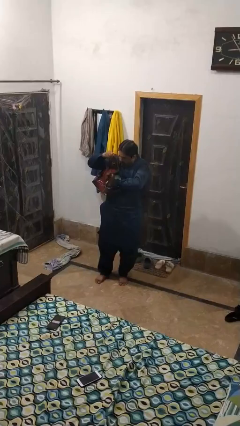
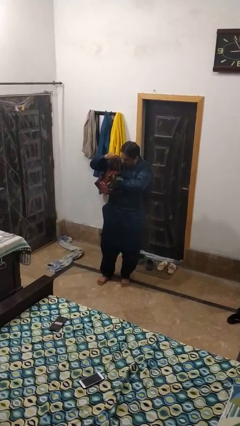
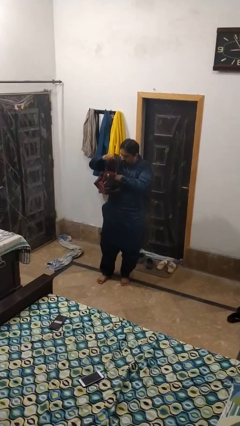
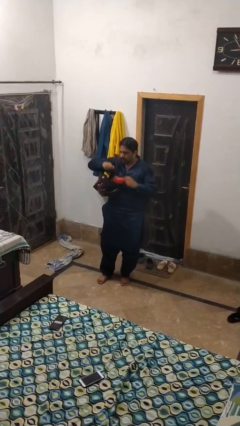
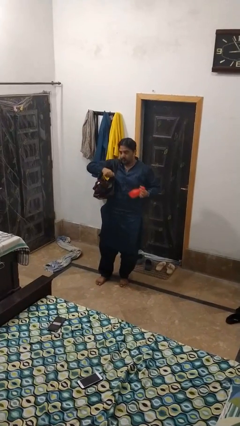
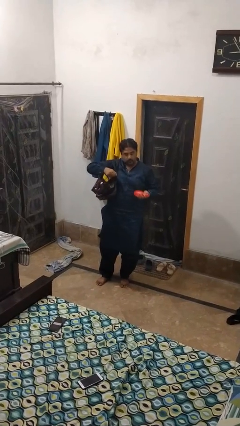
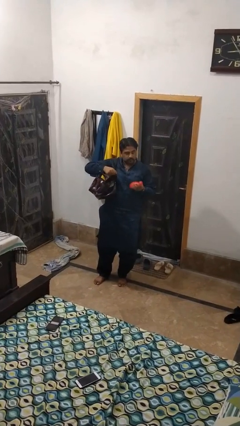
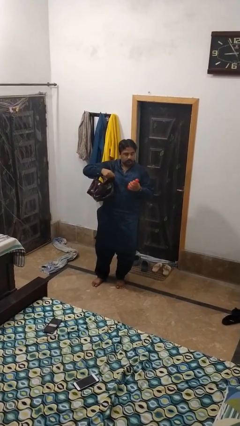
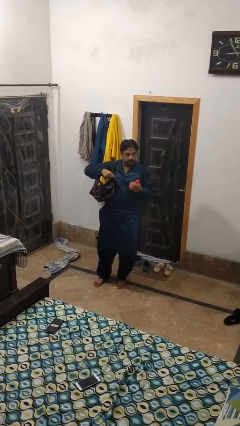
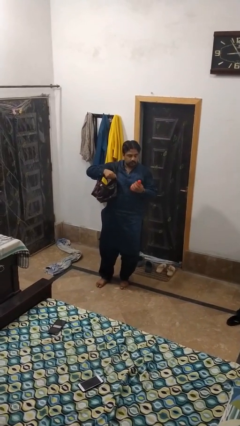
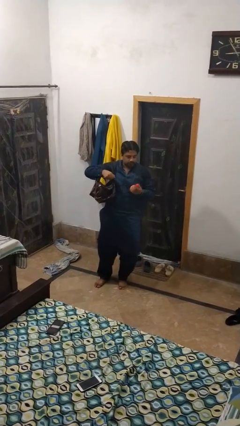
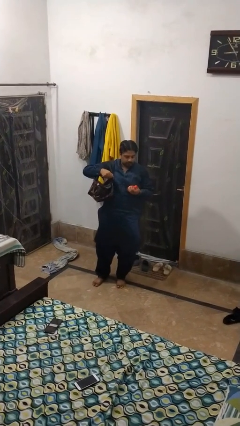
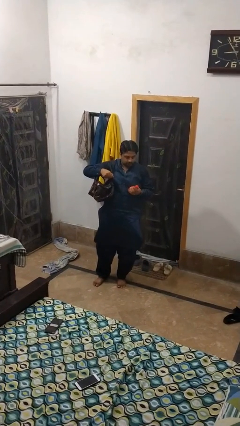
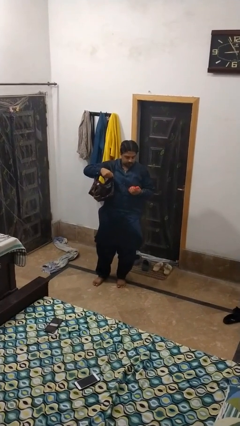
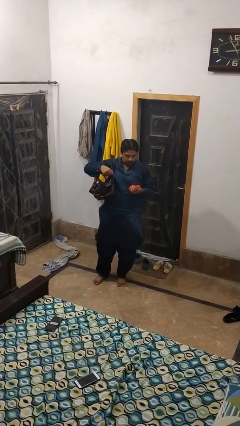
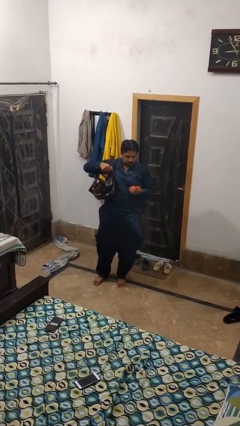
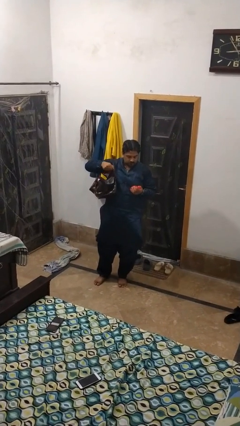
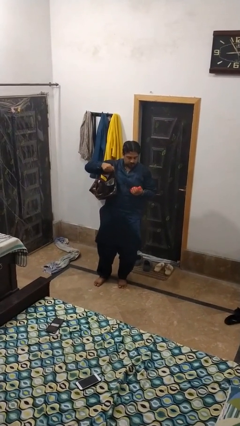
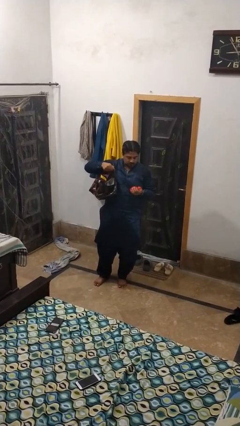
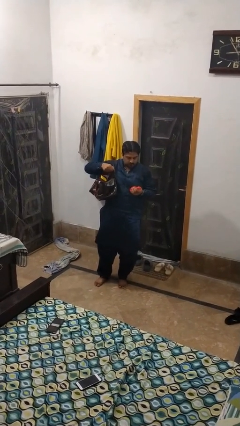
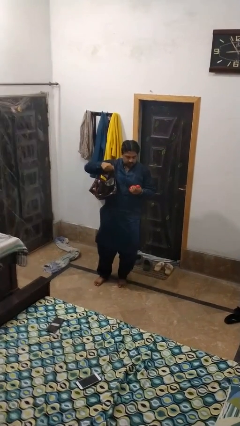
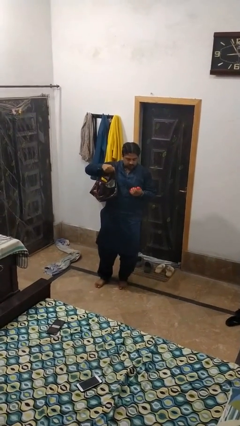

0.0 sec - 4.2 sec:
person takes object from purse

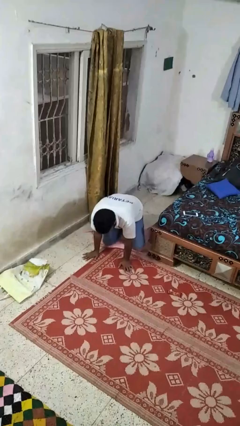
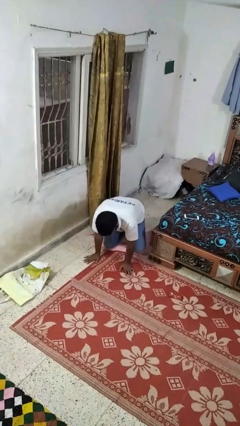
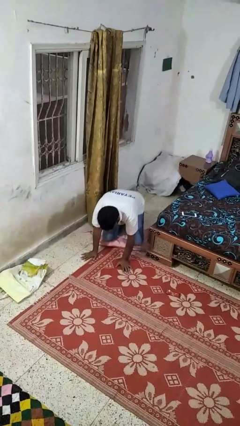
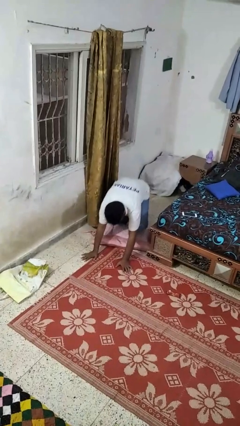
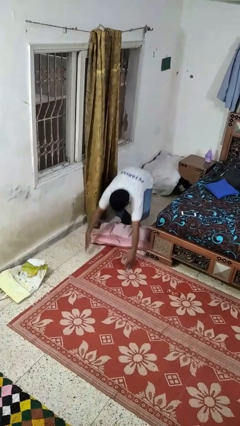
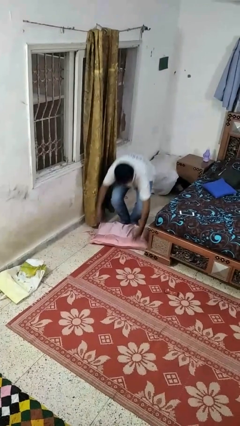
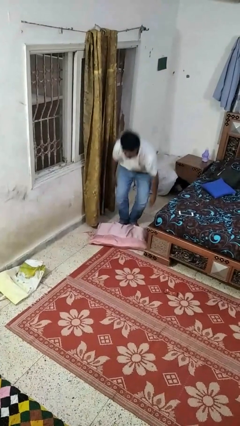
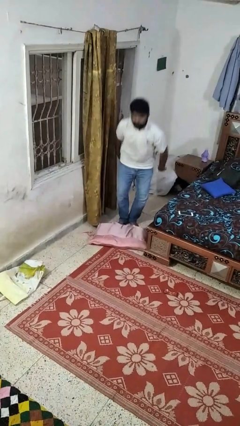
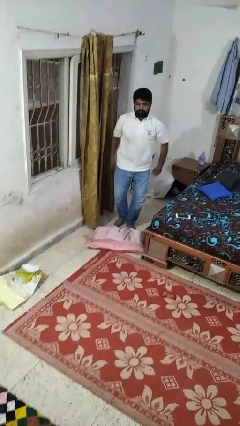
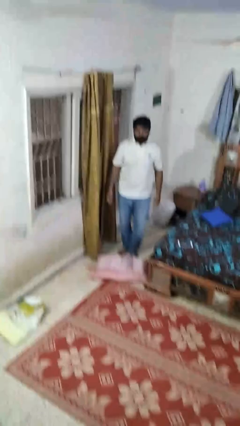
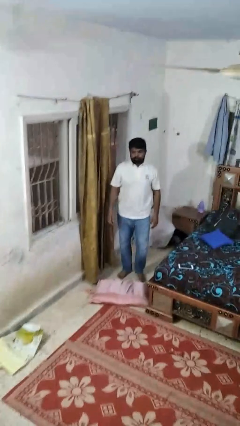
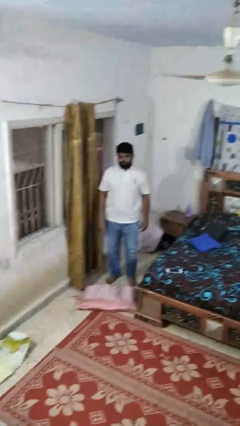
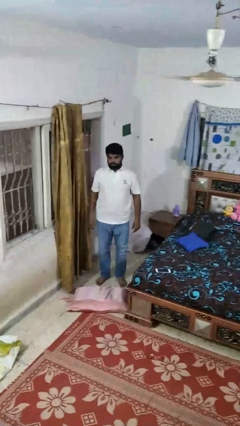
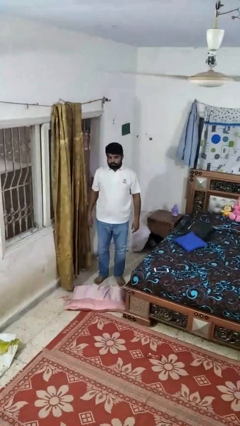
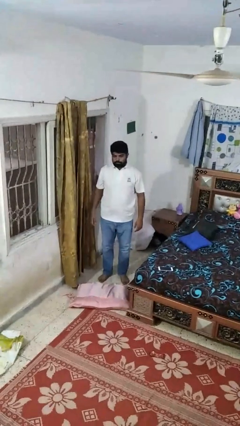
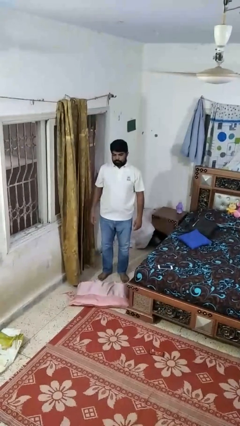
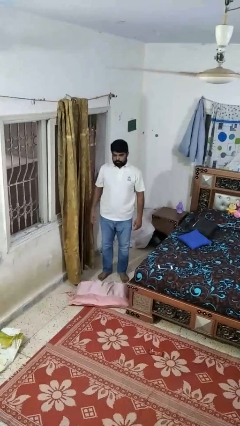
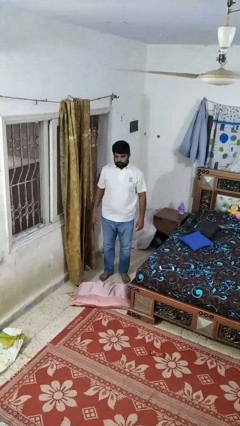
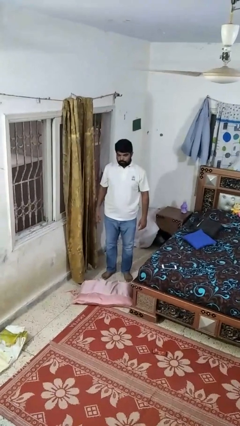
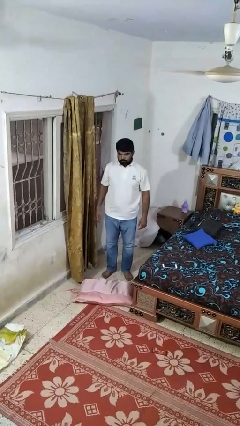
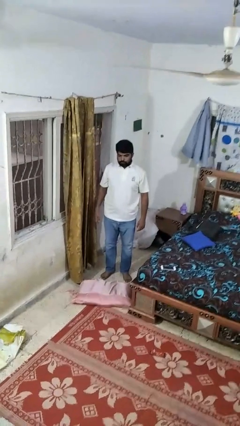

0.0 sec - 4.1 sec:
person stands up from floor

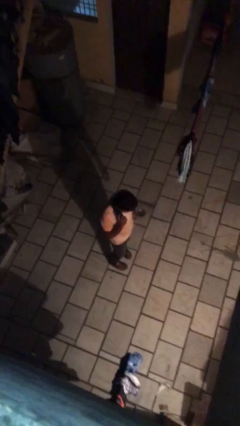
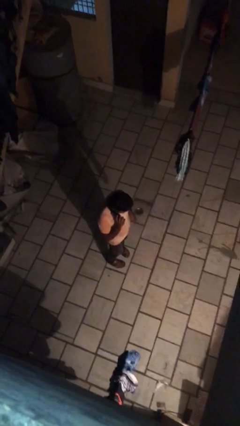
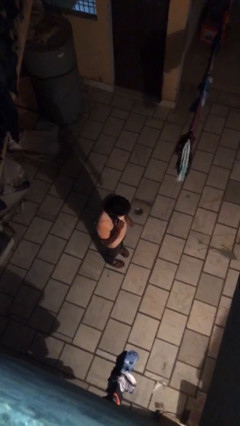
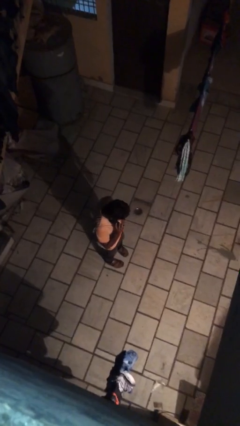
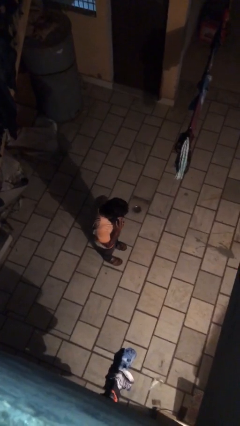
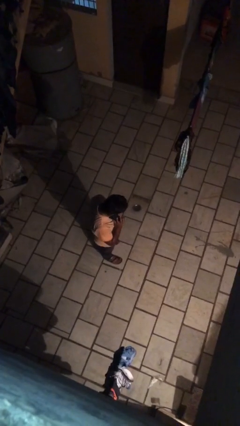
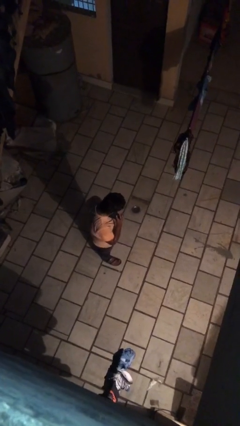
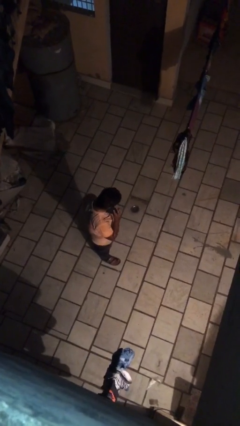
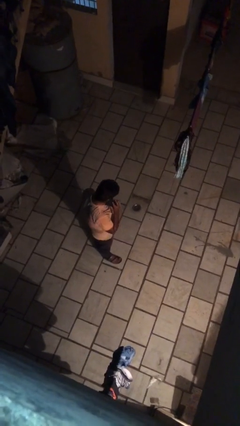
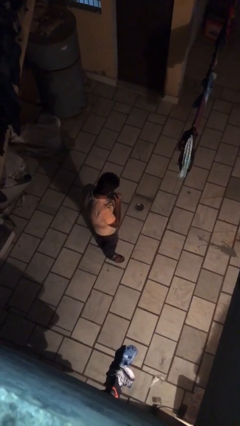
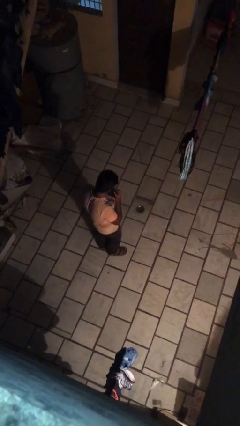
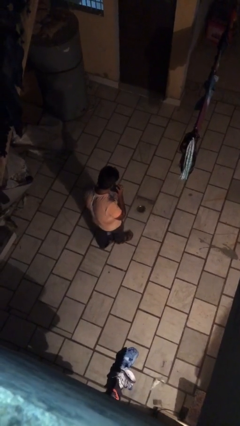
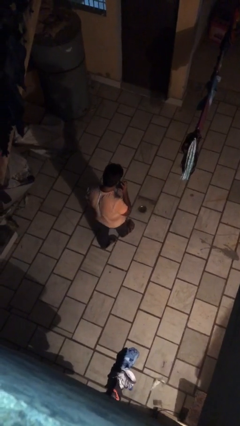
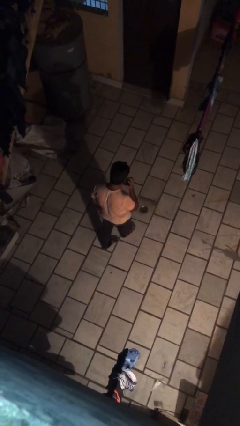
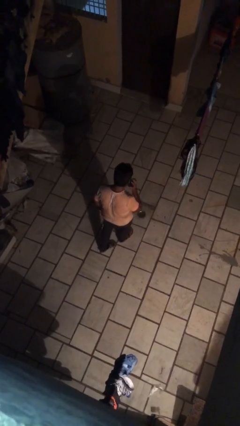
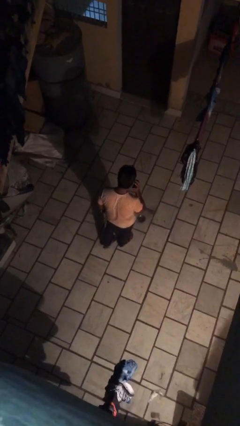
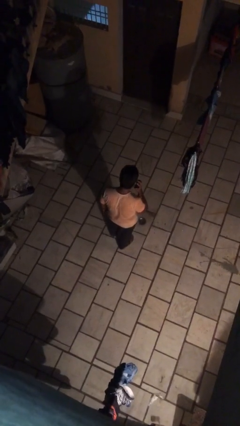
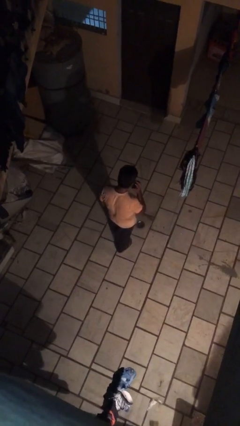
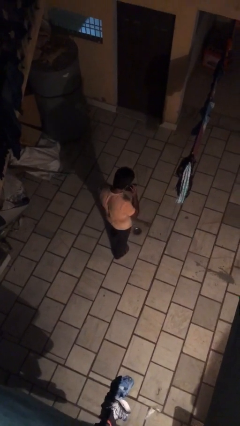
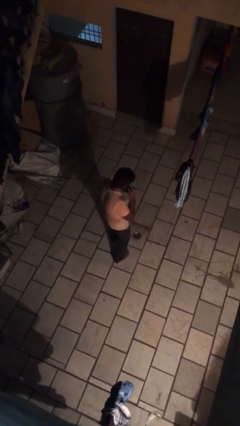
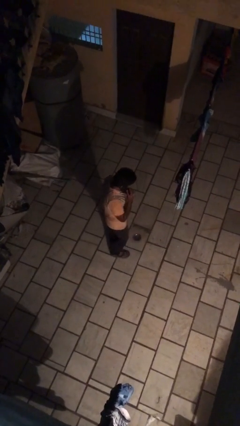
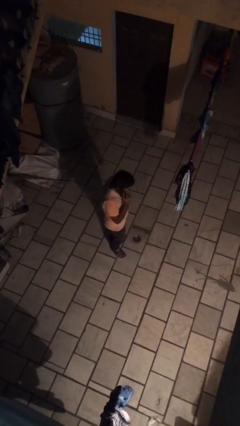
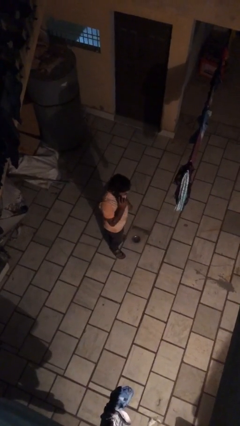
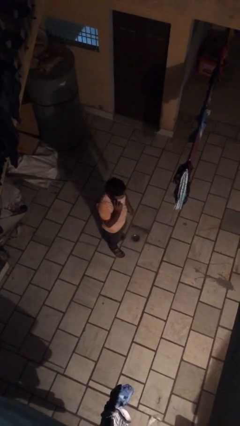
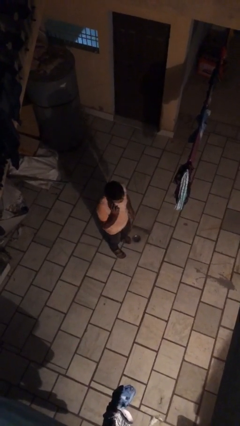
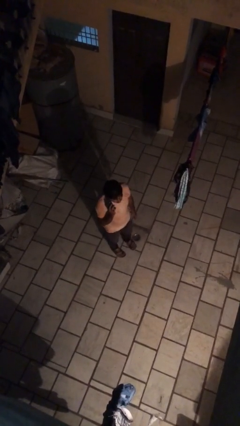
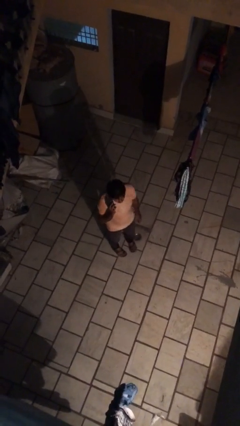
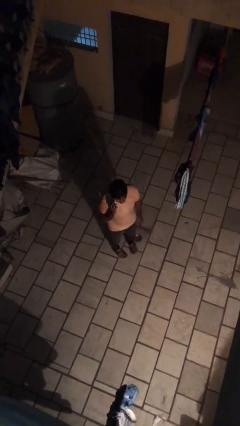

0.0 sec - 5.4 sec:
person talks on phone

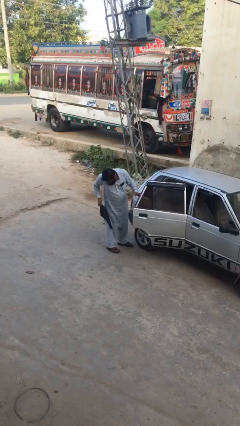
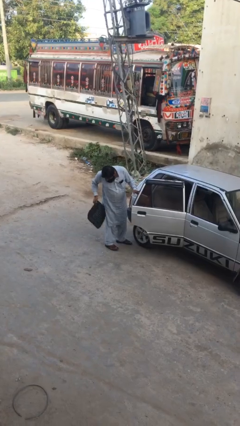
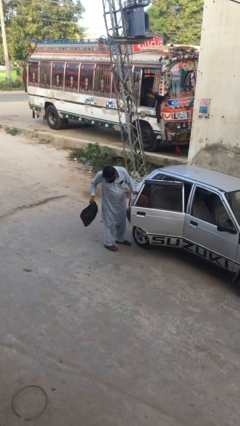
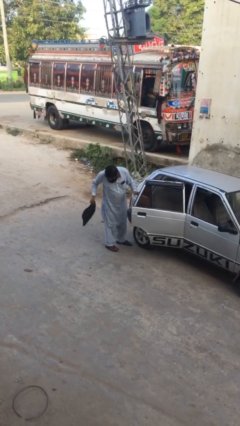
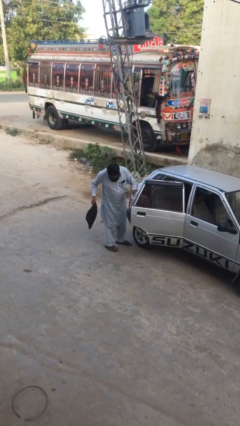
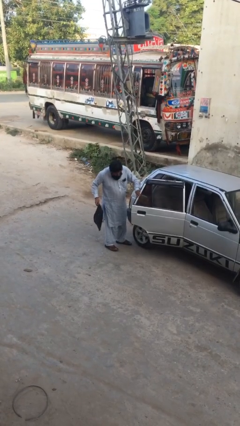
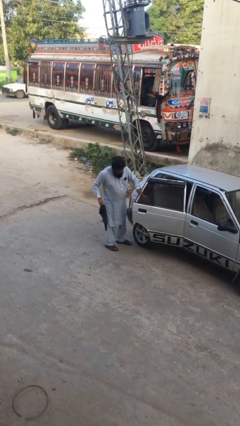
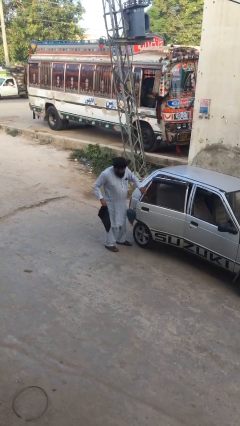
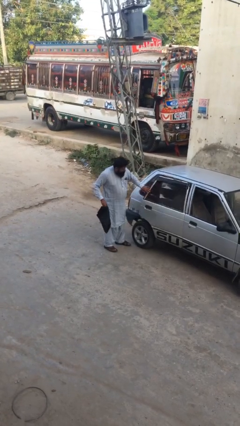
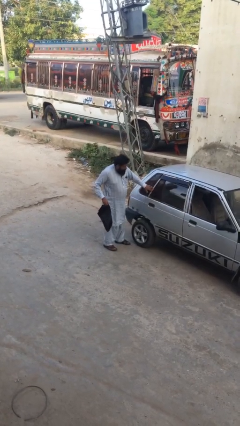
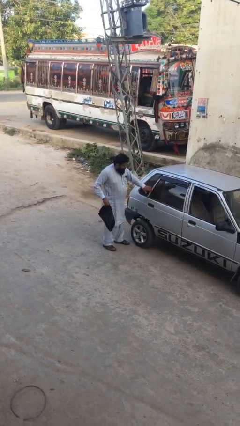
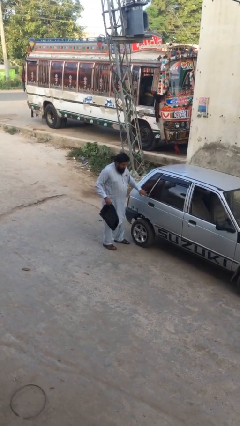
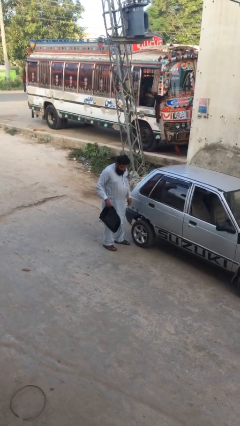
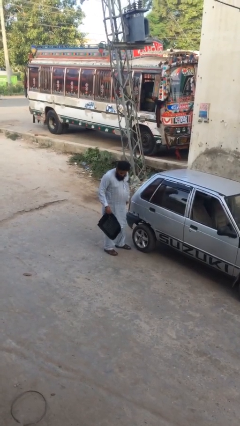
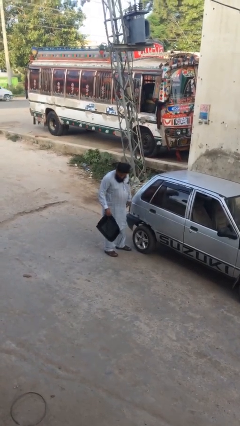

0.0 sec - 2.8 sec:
person closes car door

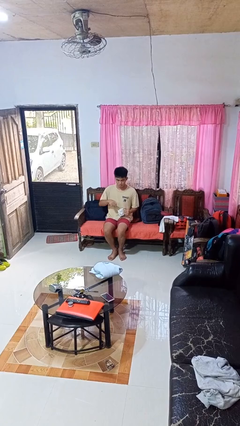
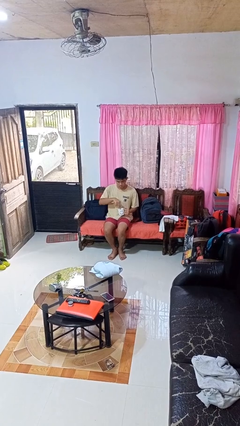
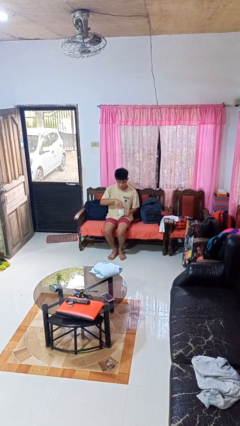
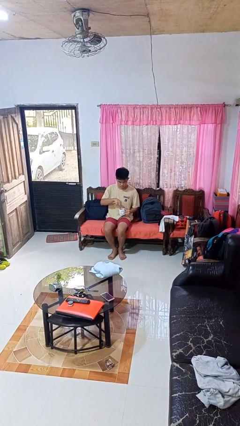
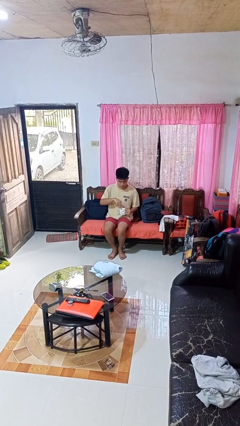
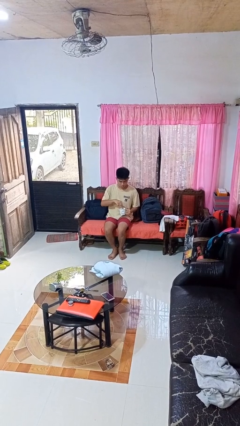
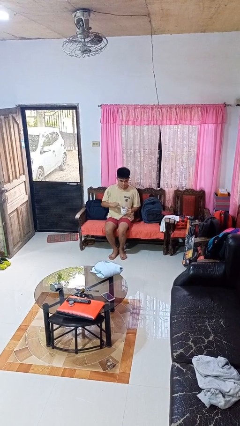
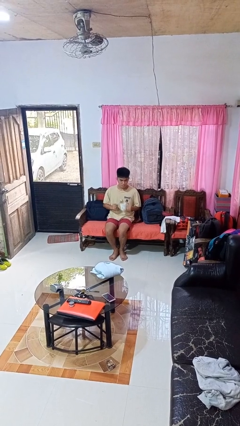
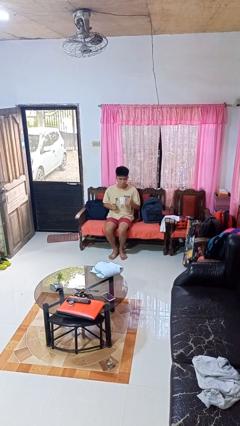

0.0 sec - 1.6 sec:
person stirs mug
